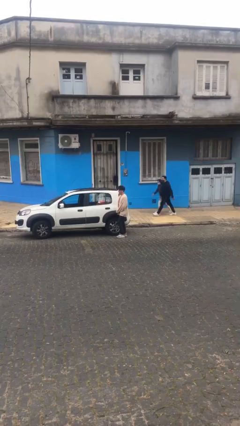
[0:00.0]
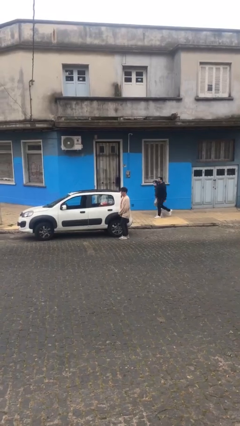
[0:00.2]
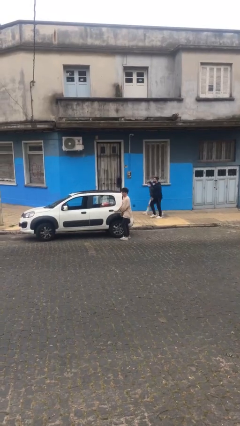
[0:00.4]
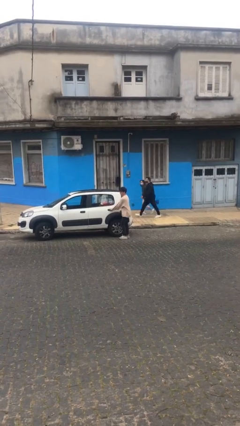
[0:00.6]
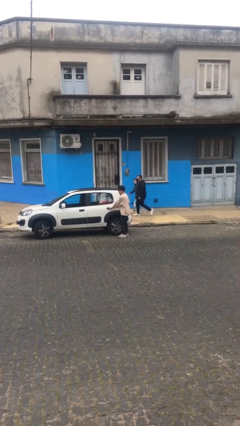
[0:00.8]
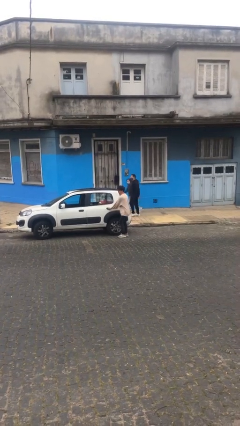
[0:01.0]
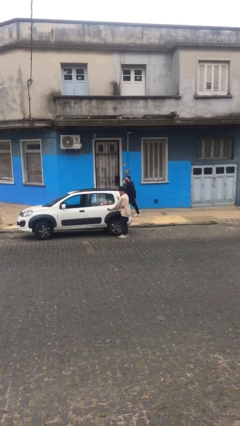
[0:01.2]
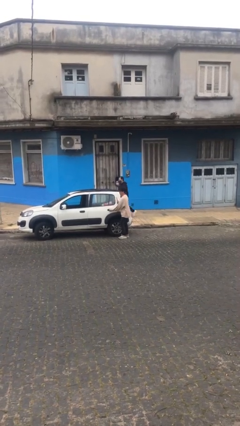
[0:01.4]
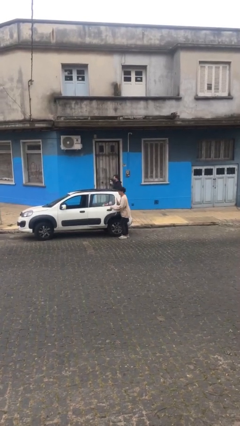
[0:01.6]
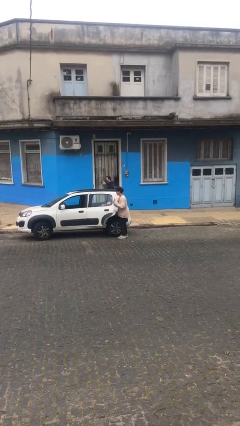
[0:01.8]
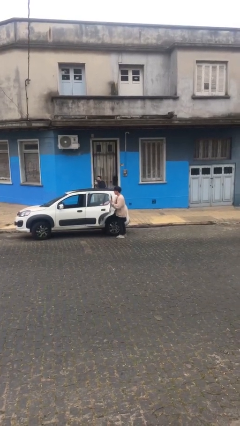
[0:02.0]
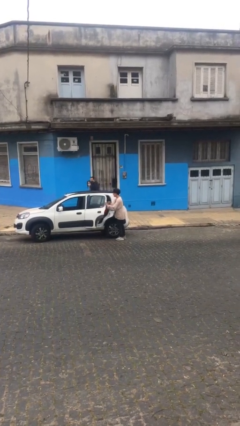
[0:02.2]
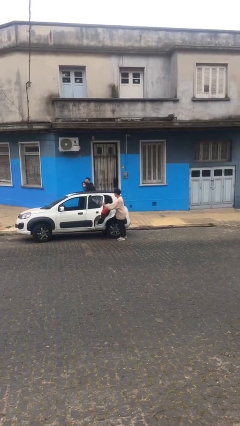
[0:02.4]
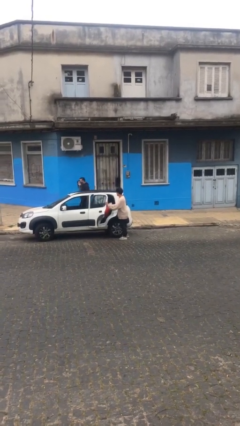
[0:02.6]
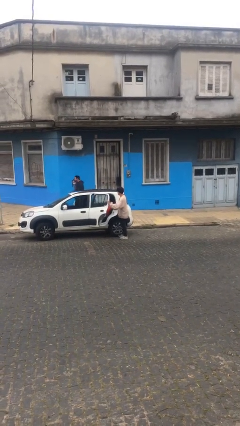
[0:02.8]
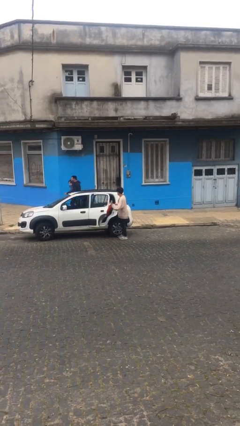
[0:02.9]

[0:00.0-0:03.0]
person opens car door

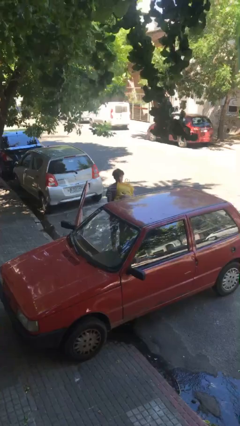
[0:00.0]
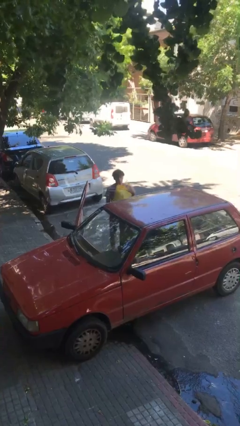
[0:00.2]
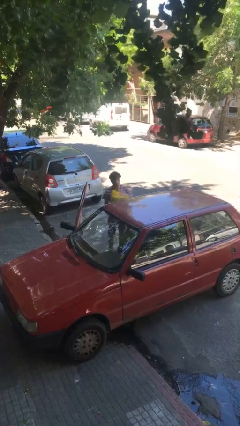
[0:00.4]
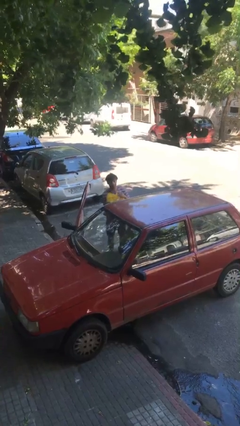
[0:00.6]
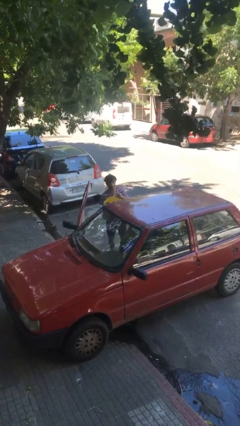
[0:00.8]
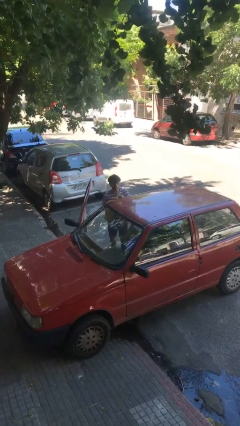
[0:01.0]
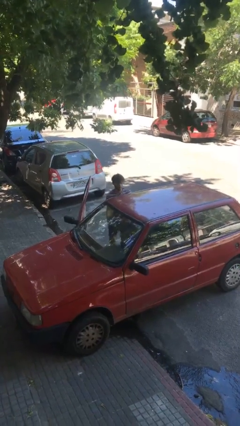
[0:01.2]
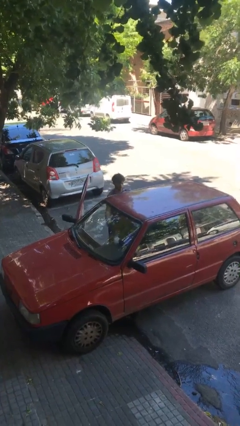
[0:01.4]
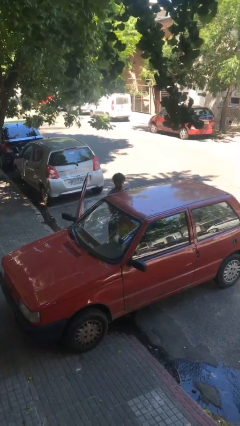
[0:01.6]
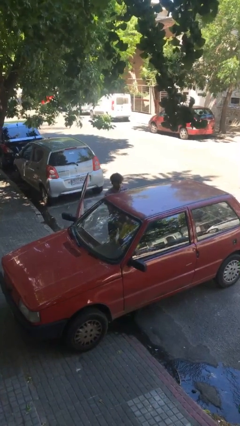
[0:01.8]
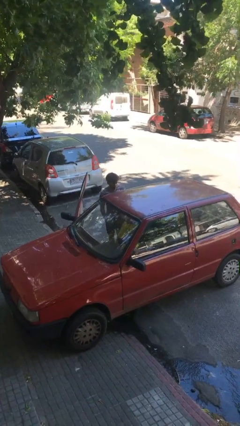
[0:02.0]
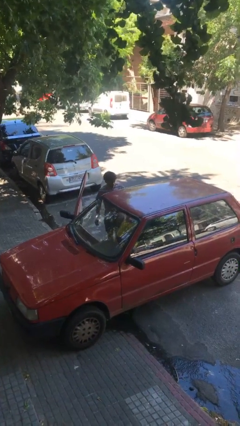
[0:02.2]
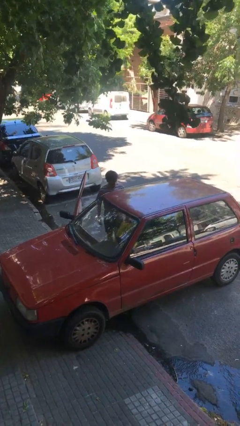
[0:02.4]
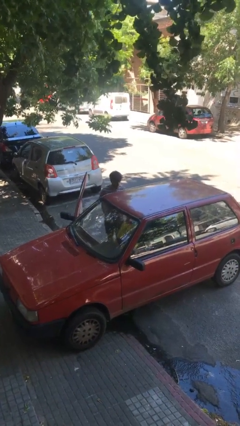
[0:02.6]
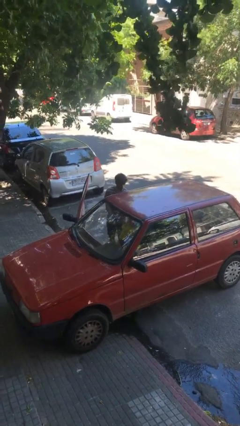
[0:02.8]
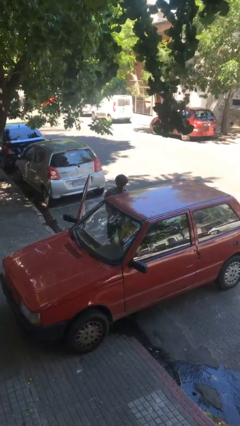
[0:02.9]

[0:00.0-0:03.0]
person loads car

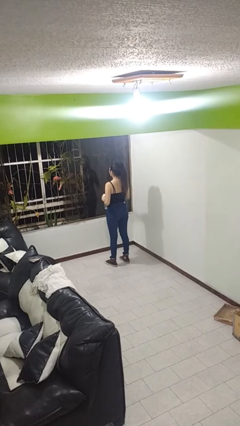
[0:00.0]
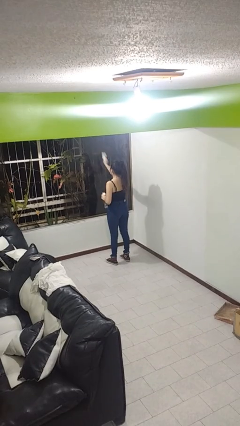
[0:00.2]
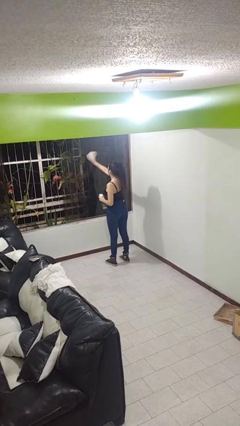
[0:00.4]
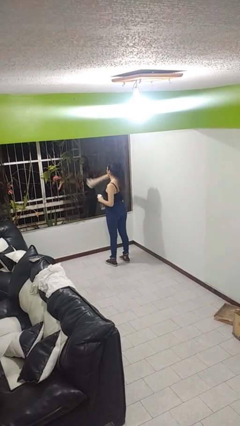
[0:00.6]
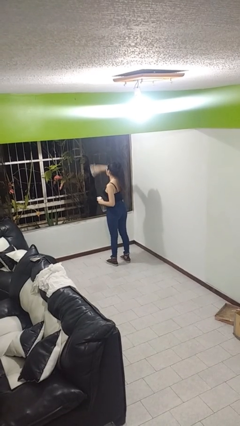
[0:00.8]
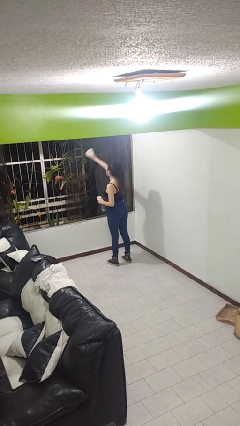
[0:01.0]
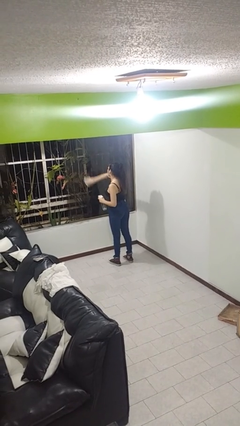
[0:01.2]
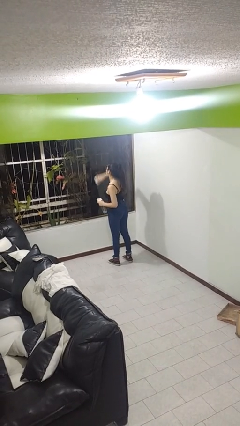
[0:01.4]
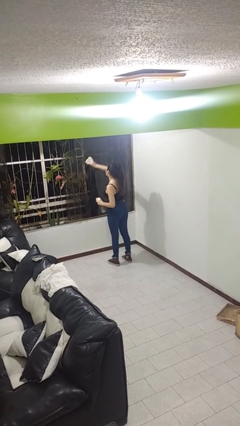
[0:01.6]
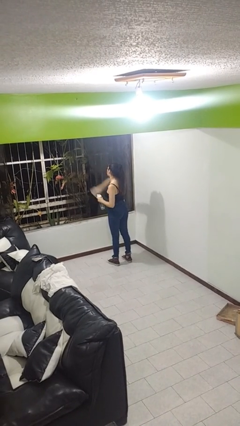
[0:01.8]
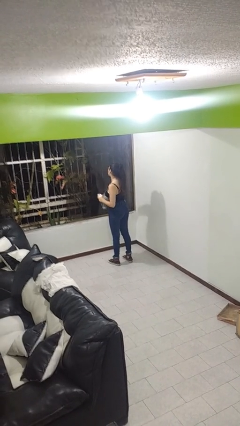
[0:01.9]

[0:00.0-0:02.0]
person washes window

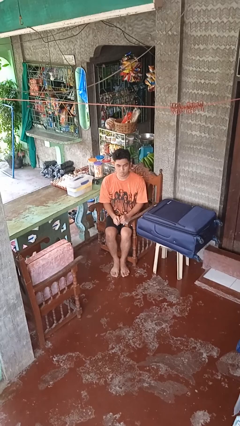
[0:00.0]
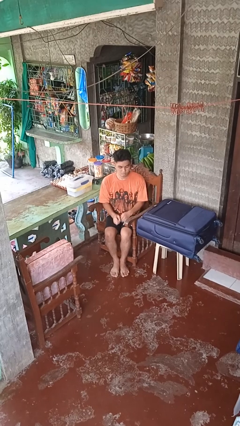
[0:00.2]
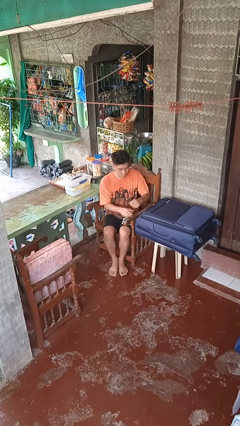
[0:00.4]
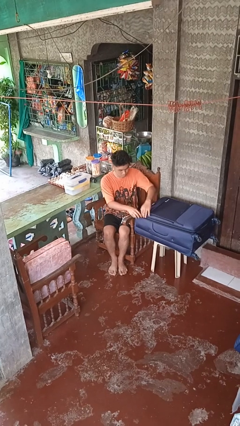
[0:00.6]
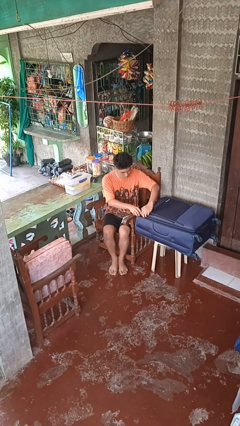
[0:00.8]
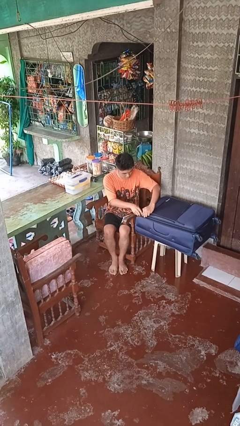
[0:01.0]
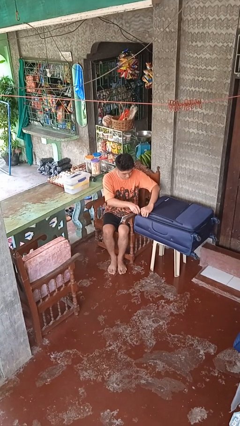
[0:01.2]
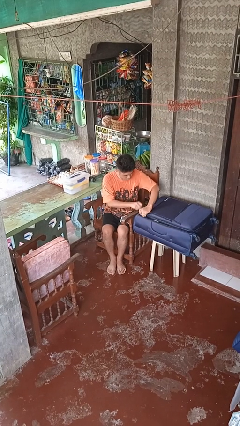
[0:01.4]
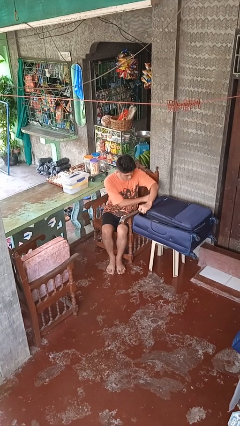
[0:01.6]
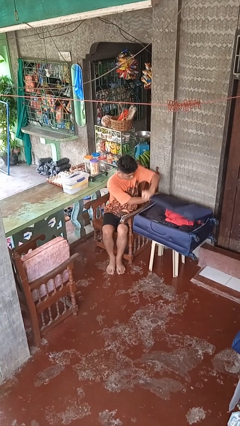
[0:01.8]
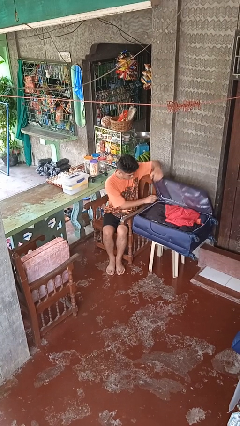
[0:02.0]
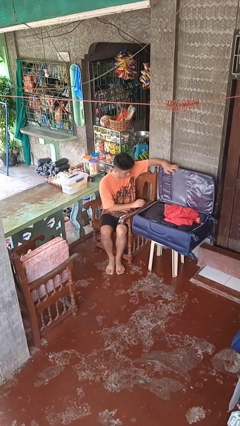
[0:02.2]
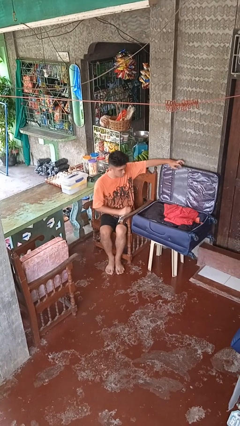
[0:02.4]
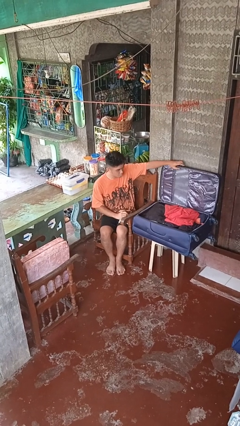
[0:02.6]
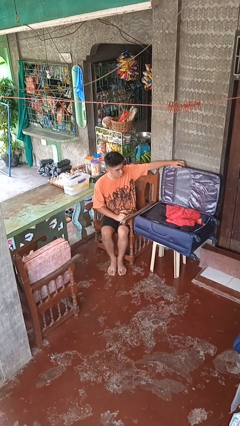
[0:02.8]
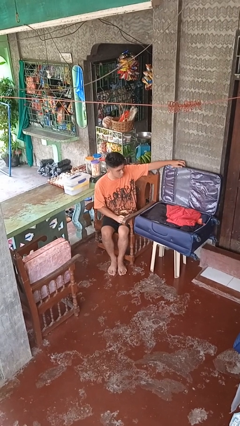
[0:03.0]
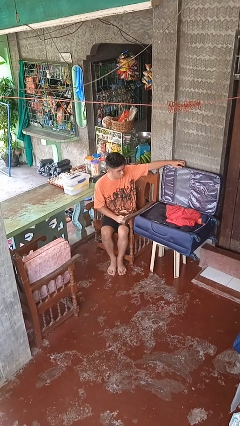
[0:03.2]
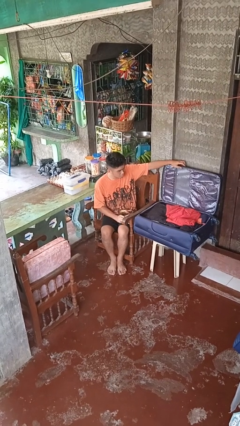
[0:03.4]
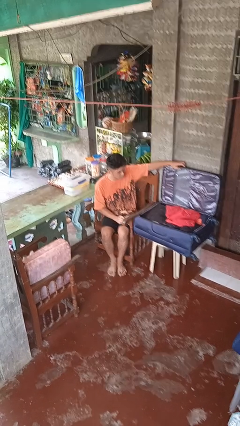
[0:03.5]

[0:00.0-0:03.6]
person opens suitcase

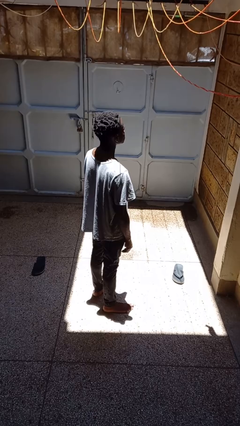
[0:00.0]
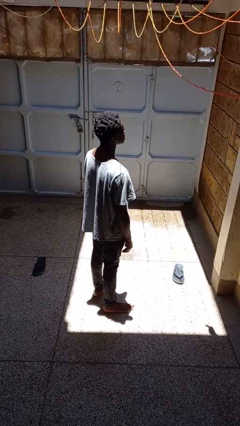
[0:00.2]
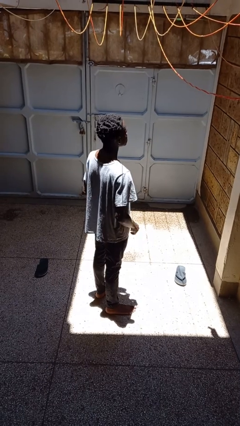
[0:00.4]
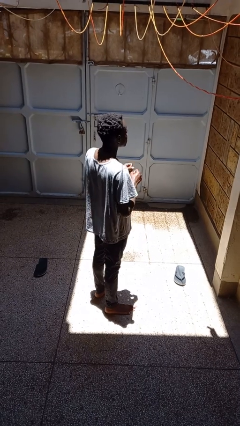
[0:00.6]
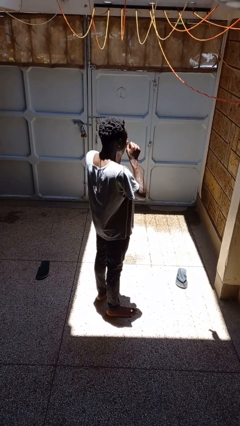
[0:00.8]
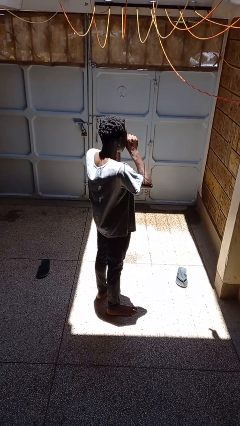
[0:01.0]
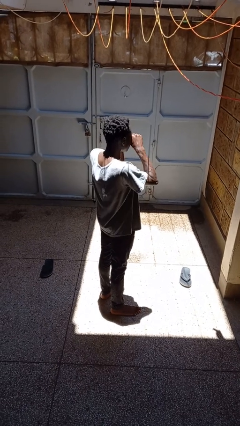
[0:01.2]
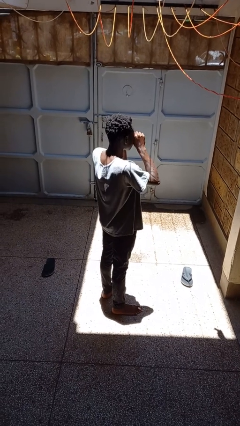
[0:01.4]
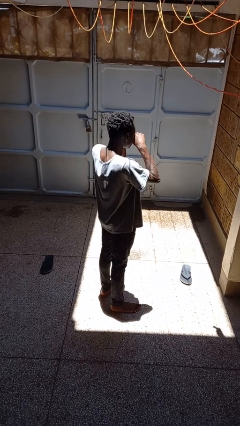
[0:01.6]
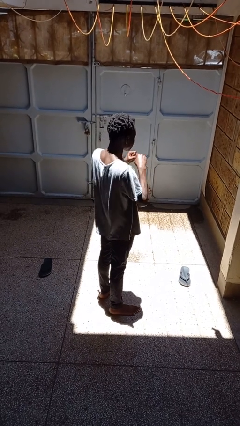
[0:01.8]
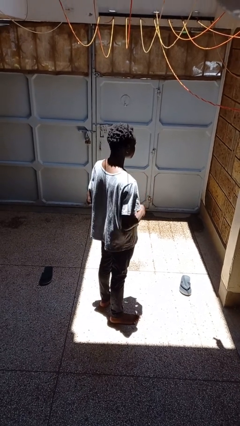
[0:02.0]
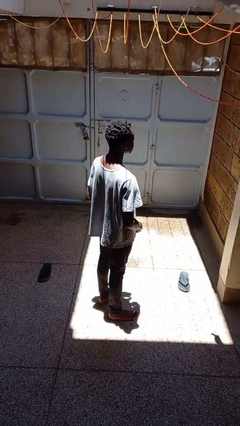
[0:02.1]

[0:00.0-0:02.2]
person rubs eyes

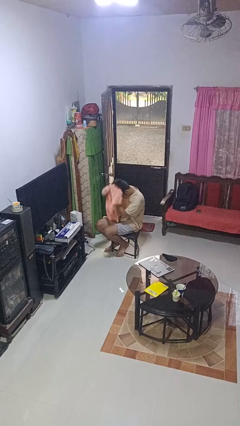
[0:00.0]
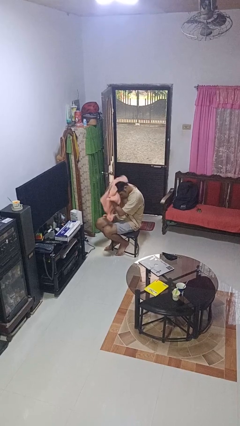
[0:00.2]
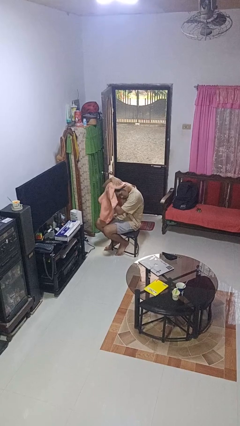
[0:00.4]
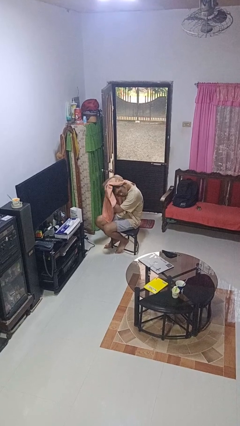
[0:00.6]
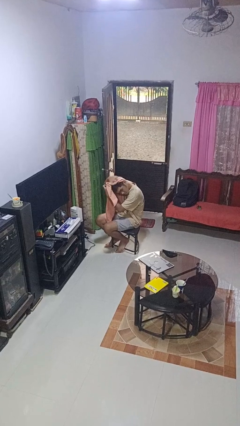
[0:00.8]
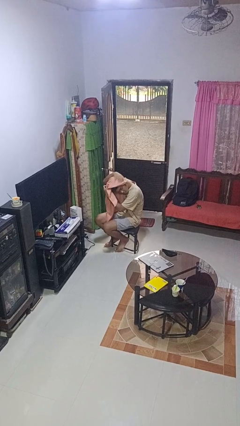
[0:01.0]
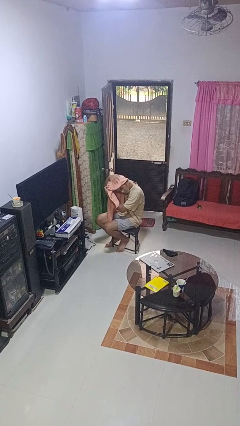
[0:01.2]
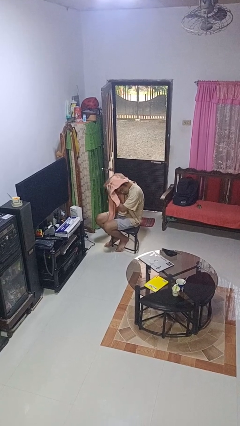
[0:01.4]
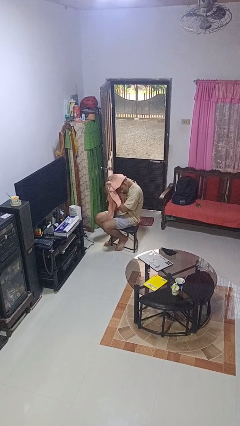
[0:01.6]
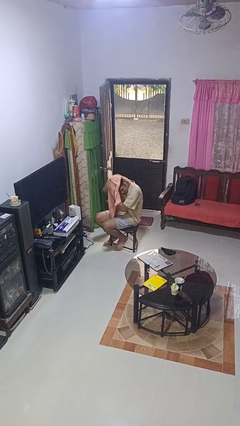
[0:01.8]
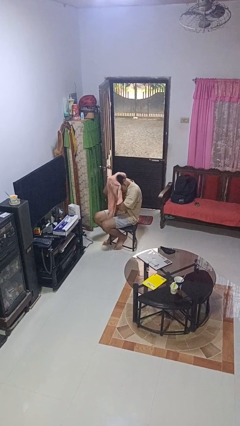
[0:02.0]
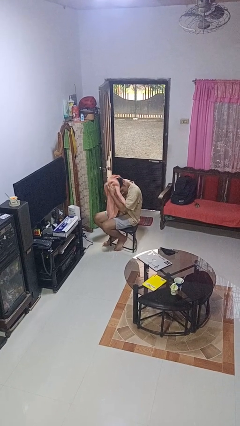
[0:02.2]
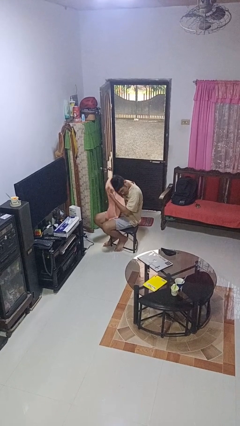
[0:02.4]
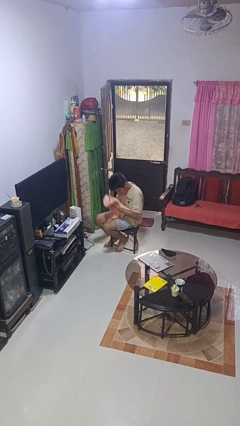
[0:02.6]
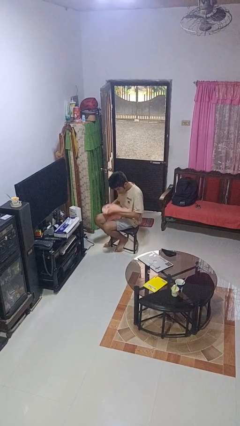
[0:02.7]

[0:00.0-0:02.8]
person dries hair with towel

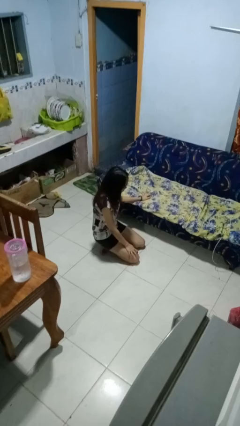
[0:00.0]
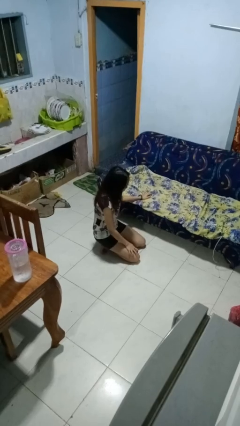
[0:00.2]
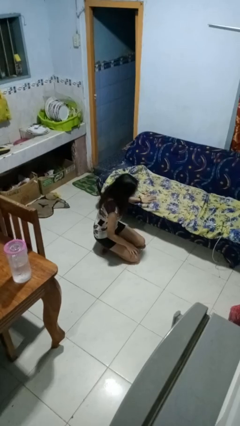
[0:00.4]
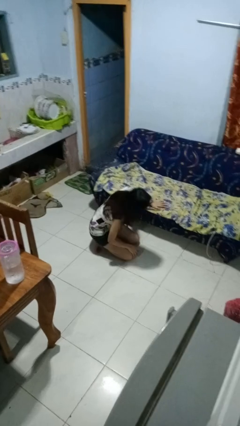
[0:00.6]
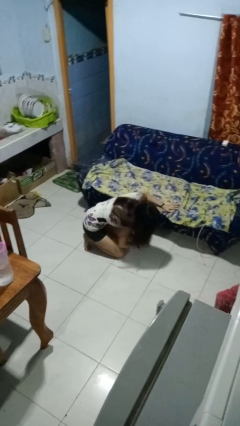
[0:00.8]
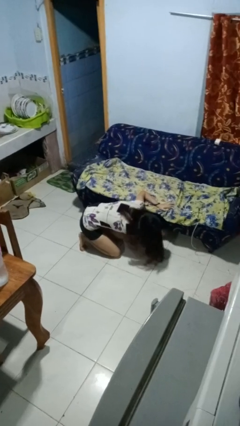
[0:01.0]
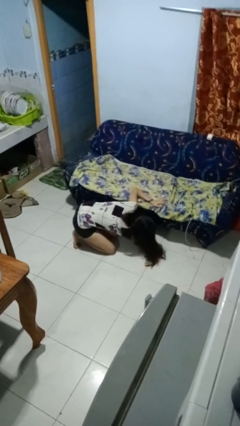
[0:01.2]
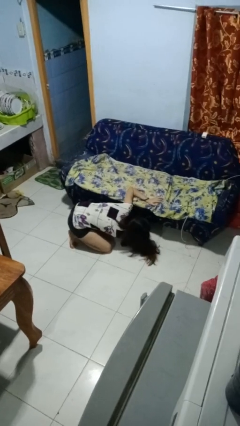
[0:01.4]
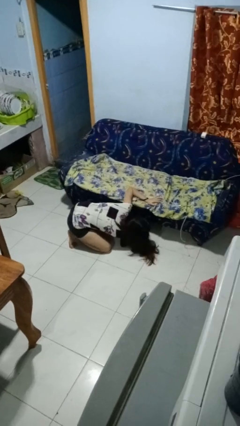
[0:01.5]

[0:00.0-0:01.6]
person searches under couch
